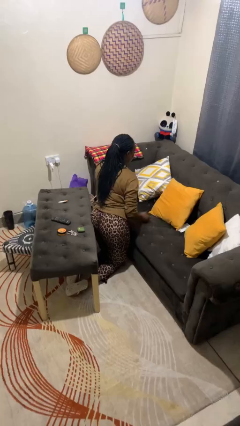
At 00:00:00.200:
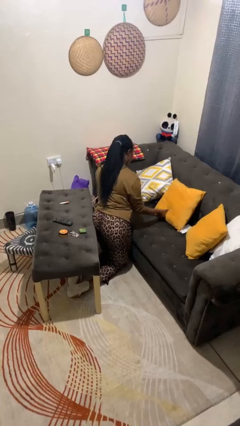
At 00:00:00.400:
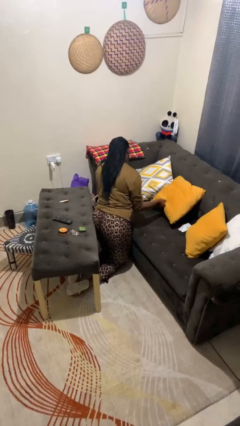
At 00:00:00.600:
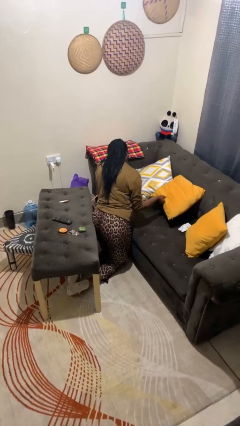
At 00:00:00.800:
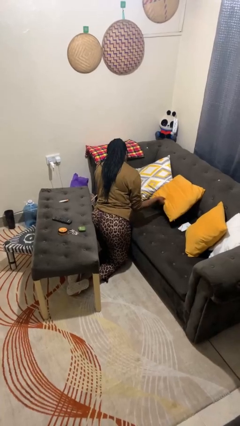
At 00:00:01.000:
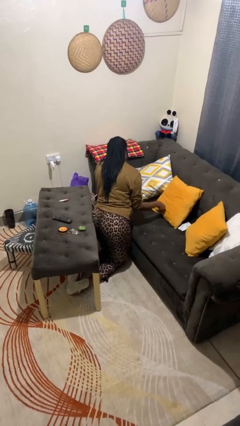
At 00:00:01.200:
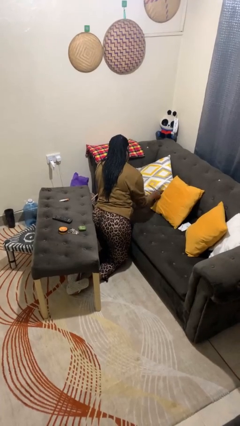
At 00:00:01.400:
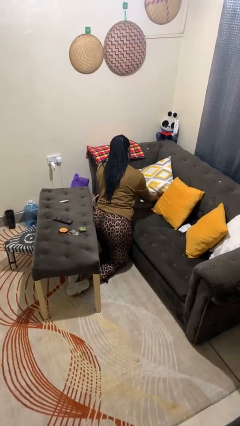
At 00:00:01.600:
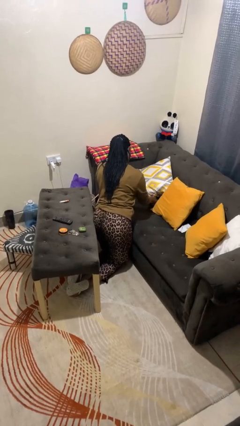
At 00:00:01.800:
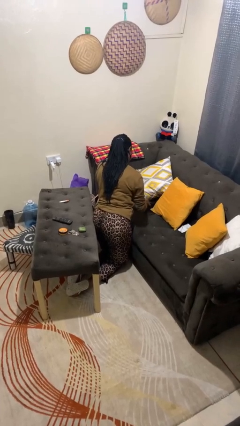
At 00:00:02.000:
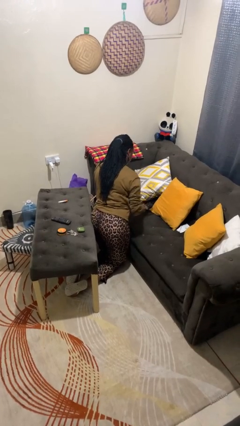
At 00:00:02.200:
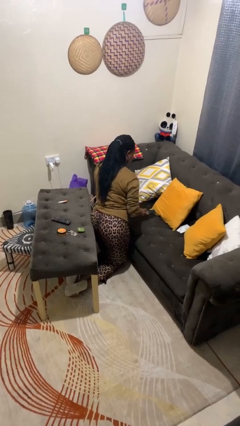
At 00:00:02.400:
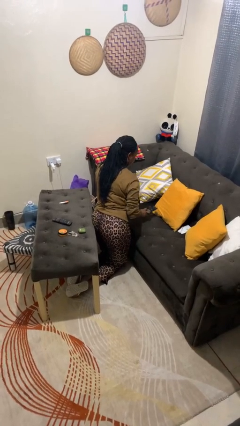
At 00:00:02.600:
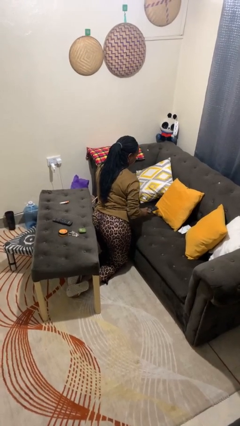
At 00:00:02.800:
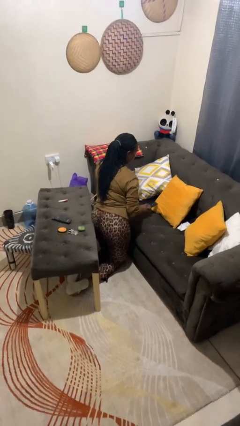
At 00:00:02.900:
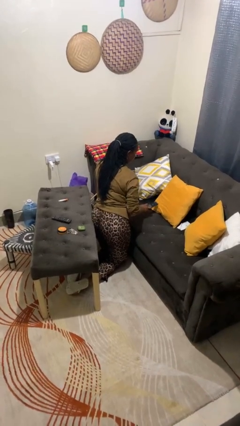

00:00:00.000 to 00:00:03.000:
person searches in couch

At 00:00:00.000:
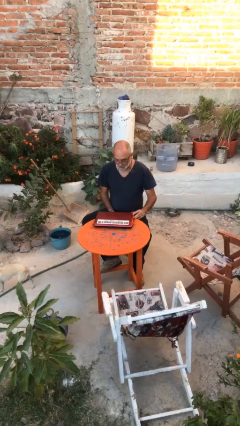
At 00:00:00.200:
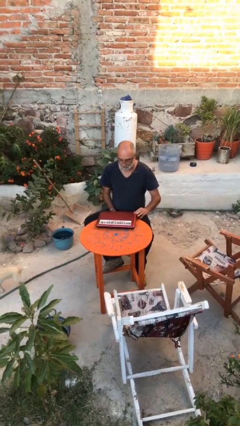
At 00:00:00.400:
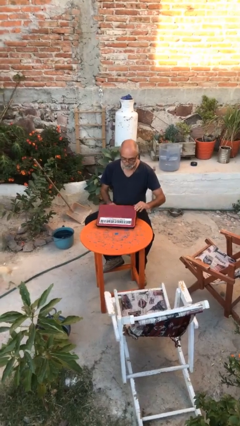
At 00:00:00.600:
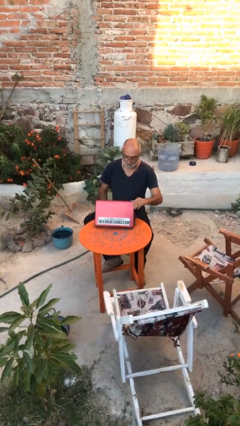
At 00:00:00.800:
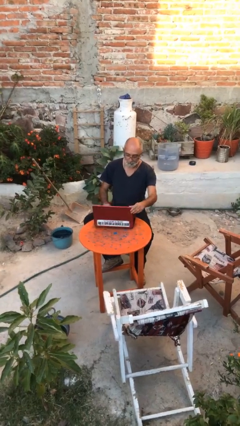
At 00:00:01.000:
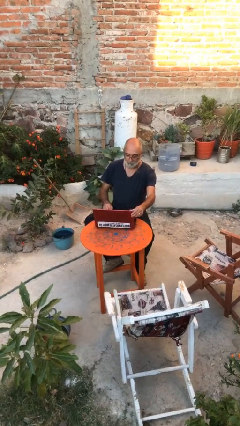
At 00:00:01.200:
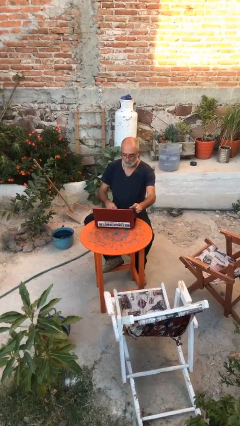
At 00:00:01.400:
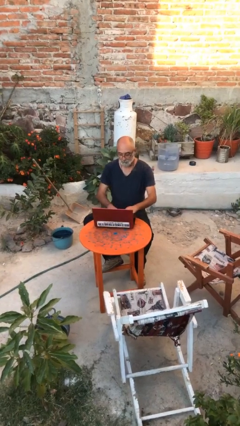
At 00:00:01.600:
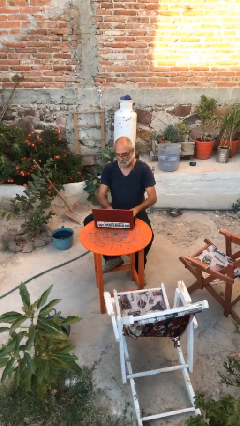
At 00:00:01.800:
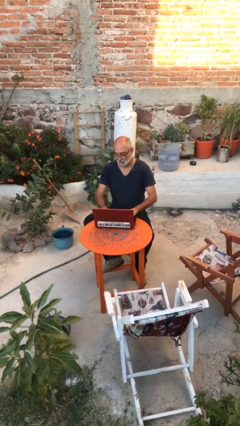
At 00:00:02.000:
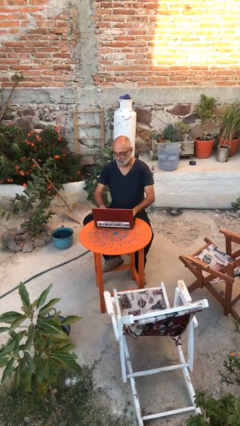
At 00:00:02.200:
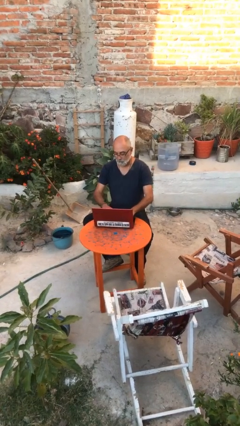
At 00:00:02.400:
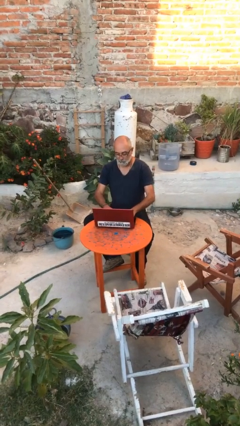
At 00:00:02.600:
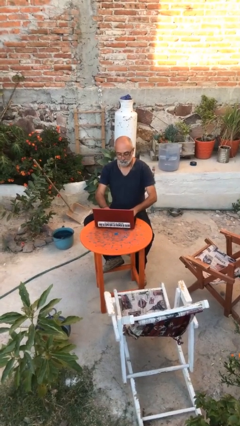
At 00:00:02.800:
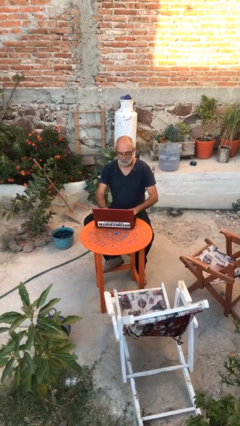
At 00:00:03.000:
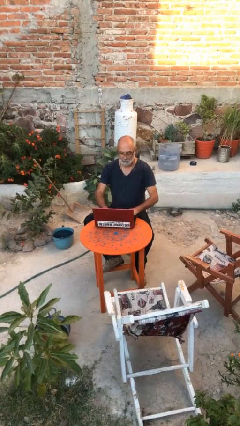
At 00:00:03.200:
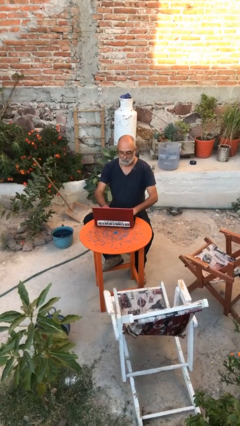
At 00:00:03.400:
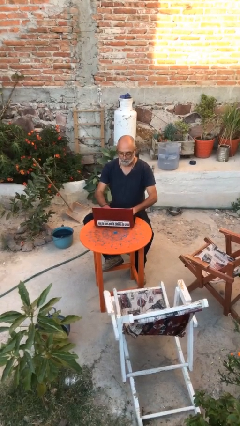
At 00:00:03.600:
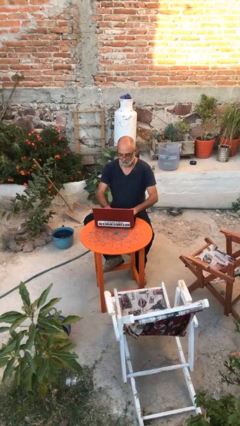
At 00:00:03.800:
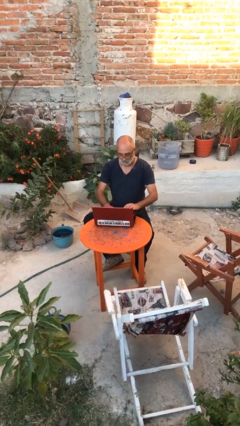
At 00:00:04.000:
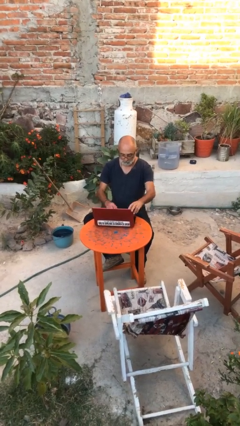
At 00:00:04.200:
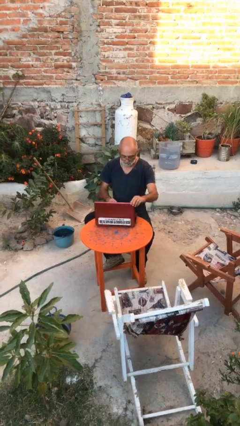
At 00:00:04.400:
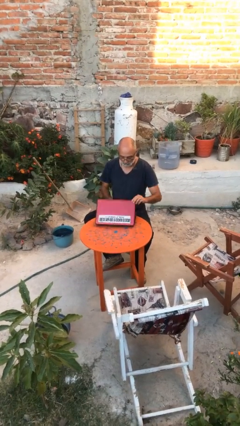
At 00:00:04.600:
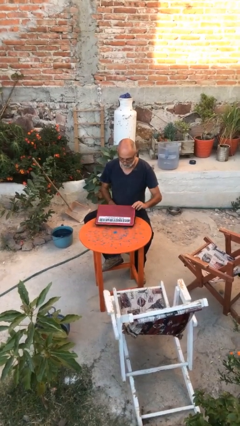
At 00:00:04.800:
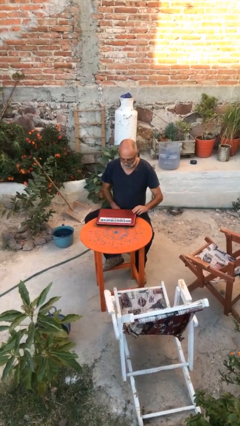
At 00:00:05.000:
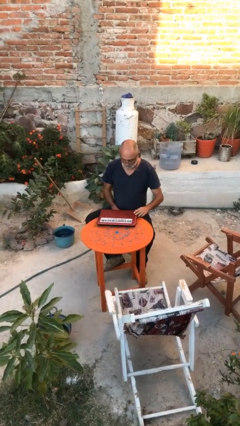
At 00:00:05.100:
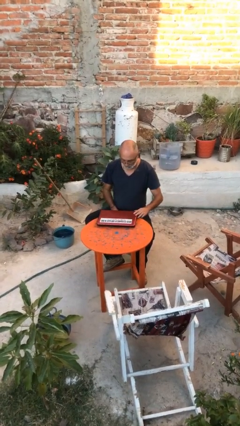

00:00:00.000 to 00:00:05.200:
person interacts with laptop

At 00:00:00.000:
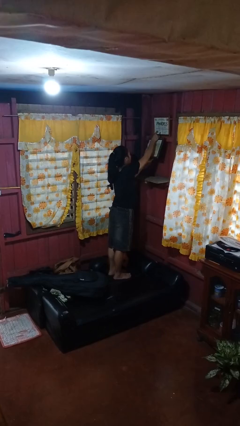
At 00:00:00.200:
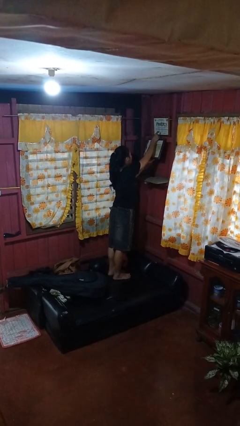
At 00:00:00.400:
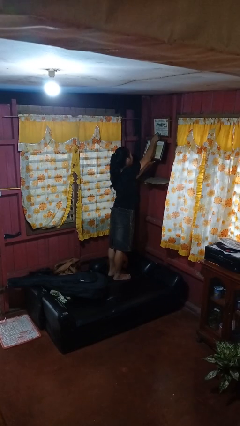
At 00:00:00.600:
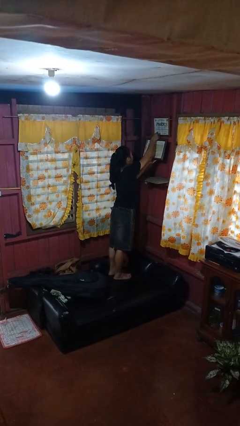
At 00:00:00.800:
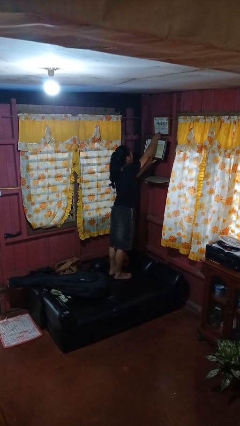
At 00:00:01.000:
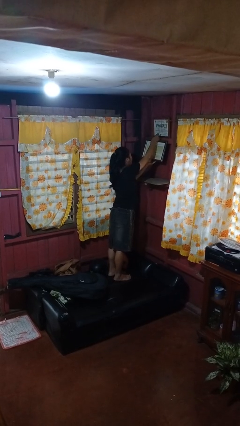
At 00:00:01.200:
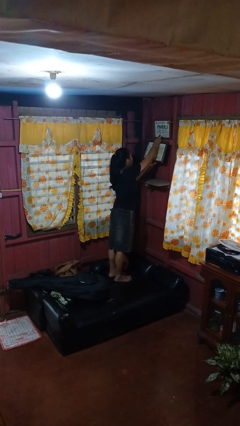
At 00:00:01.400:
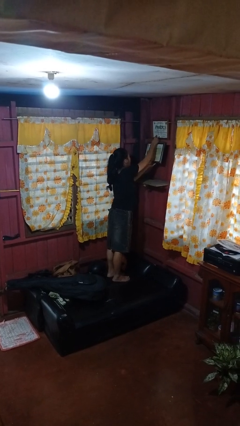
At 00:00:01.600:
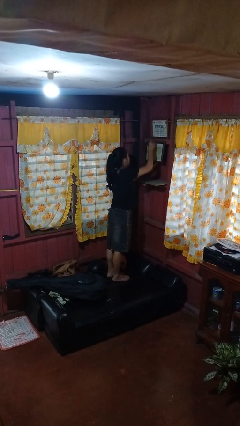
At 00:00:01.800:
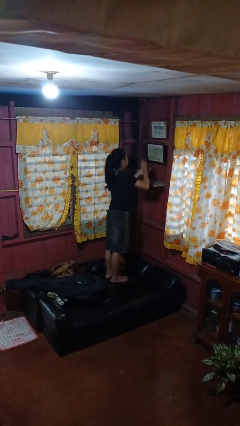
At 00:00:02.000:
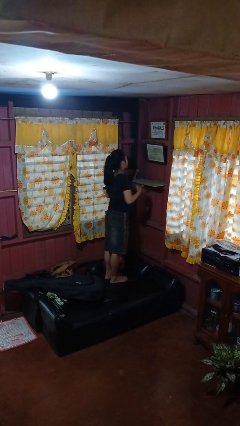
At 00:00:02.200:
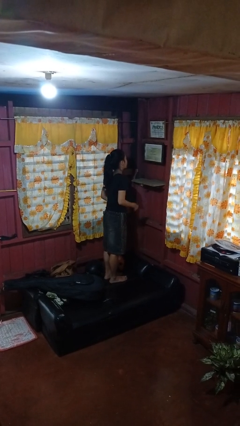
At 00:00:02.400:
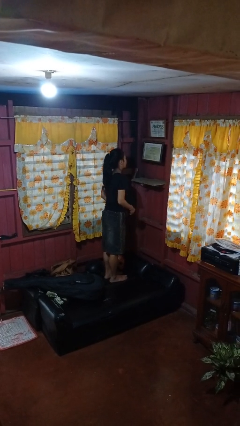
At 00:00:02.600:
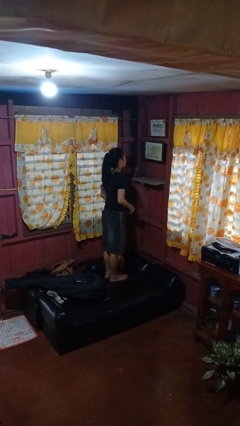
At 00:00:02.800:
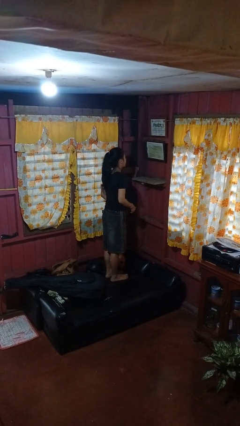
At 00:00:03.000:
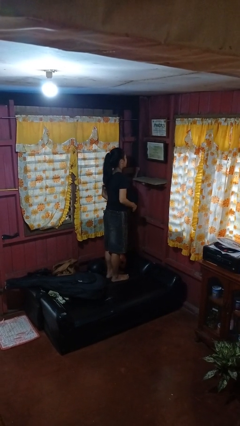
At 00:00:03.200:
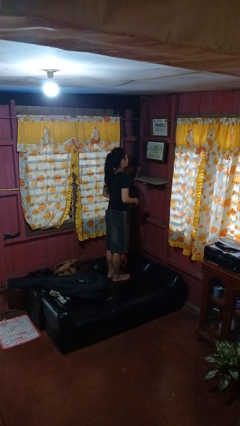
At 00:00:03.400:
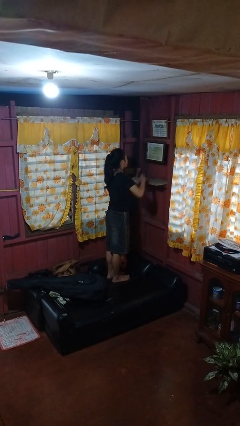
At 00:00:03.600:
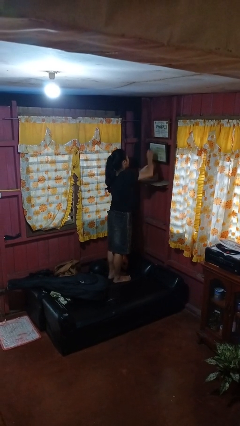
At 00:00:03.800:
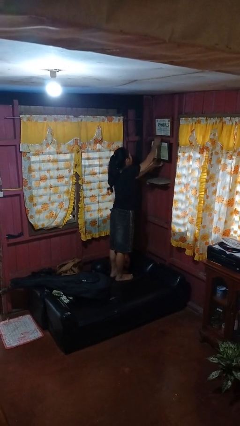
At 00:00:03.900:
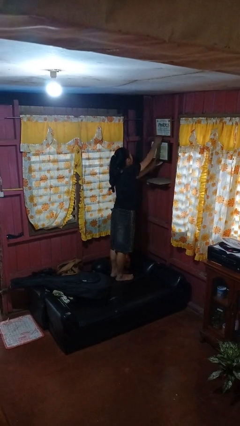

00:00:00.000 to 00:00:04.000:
person puts up picture frame

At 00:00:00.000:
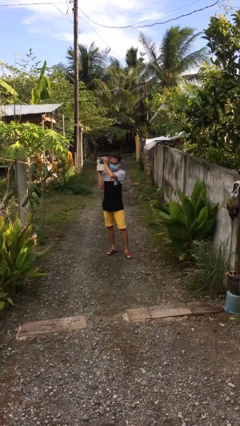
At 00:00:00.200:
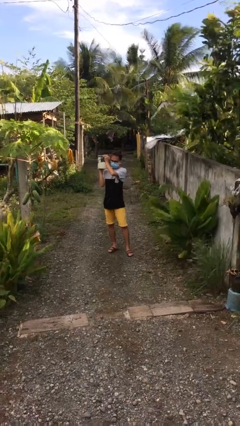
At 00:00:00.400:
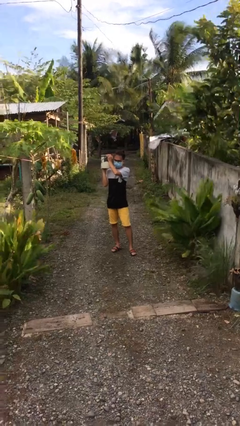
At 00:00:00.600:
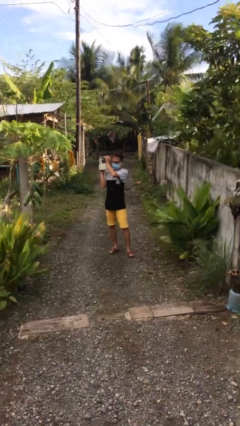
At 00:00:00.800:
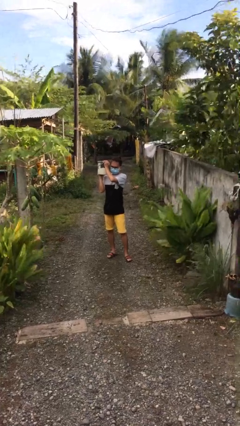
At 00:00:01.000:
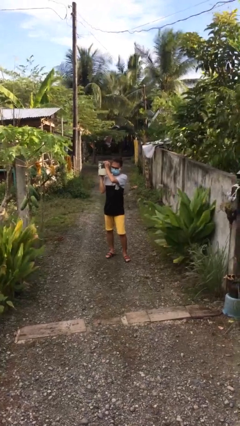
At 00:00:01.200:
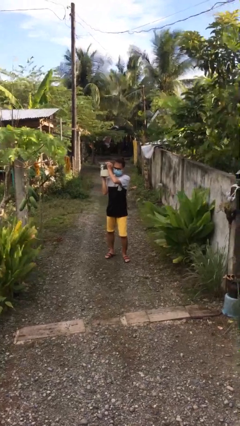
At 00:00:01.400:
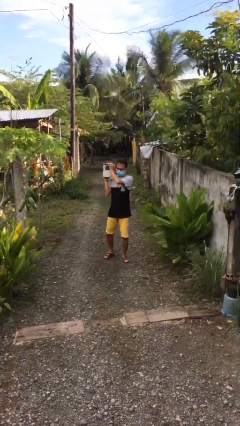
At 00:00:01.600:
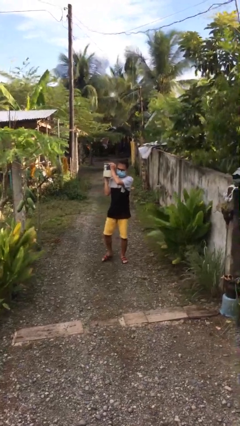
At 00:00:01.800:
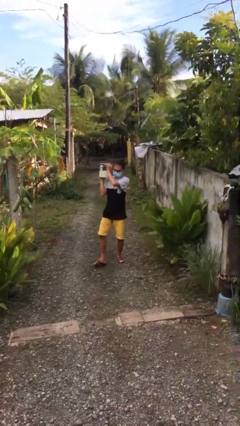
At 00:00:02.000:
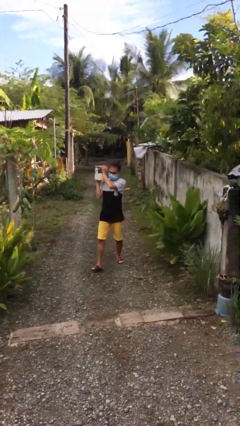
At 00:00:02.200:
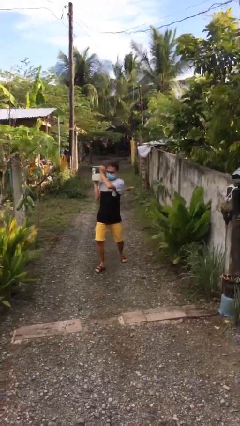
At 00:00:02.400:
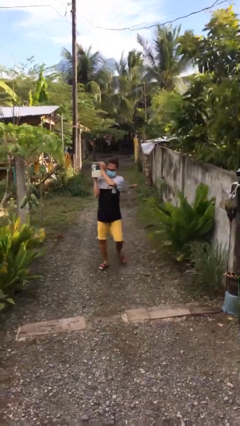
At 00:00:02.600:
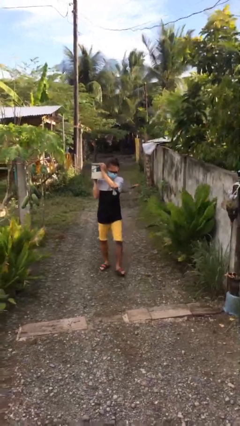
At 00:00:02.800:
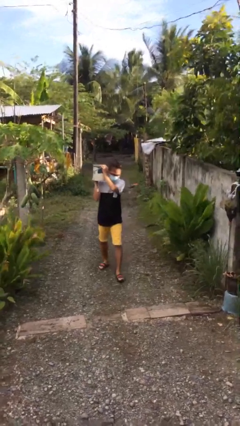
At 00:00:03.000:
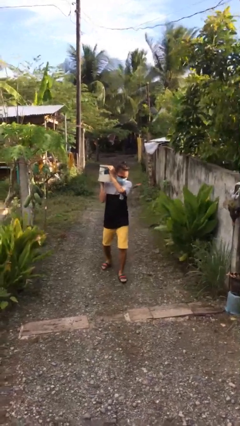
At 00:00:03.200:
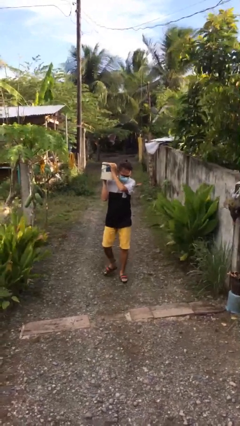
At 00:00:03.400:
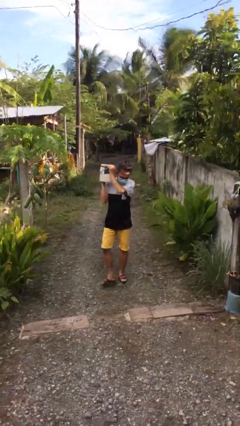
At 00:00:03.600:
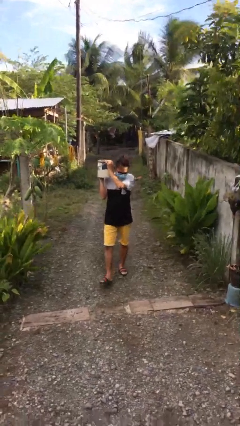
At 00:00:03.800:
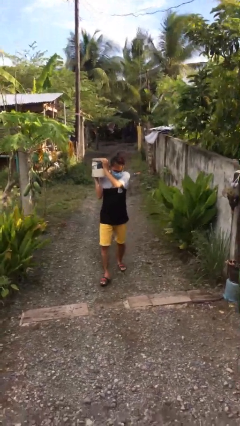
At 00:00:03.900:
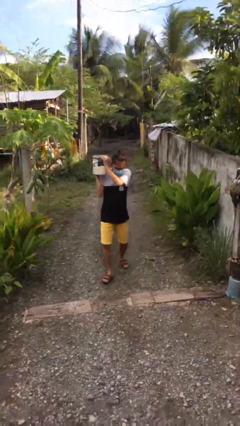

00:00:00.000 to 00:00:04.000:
person carries heavy object

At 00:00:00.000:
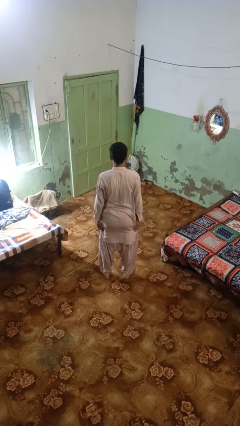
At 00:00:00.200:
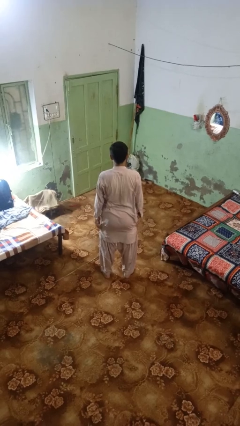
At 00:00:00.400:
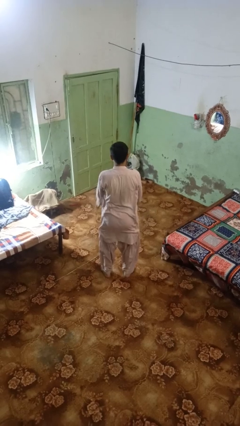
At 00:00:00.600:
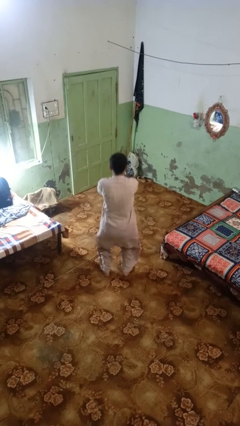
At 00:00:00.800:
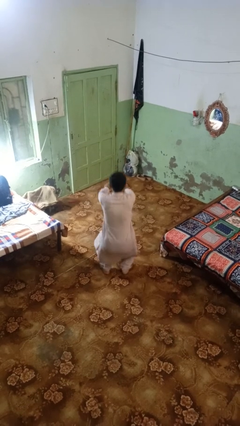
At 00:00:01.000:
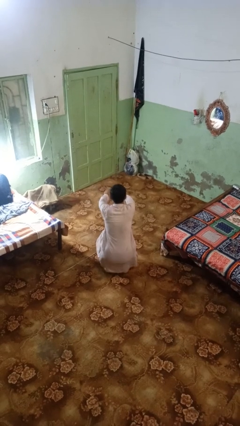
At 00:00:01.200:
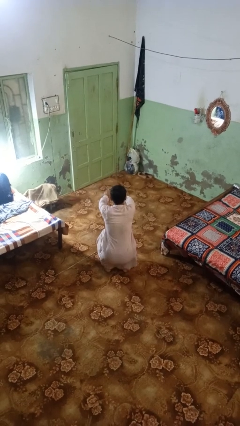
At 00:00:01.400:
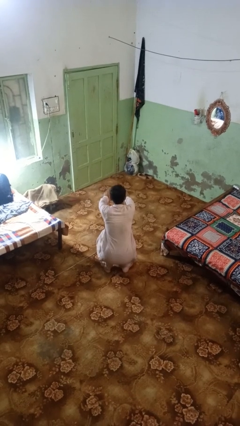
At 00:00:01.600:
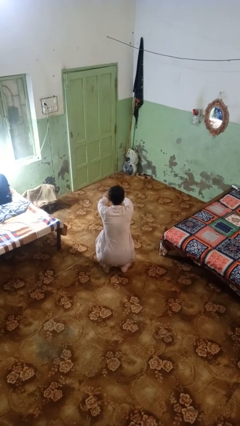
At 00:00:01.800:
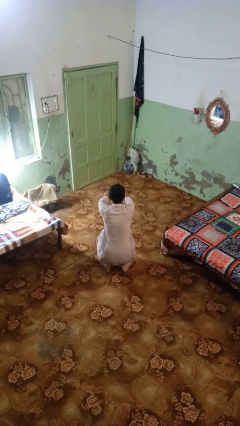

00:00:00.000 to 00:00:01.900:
person squats
